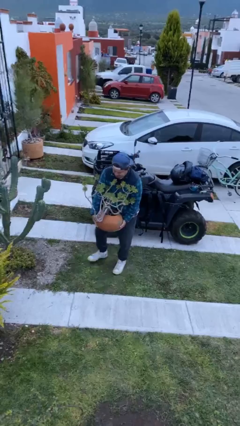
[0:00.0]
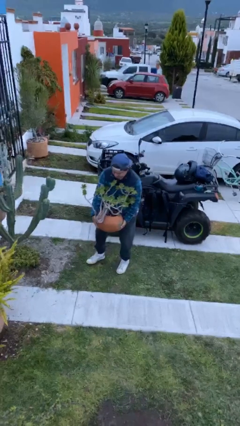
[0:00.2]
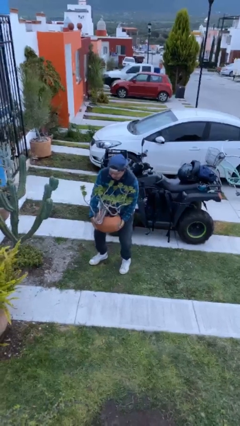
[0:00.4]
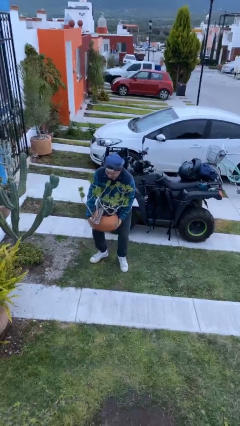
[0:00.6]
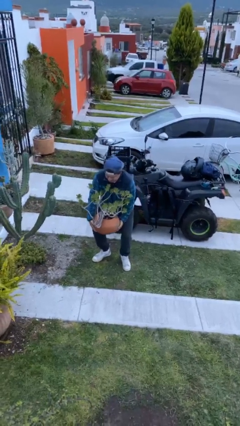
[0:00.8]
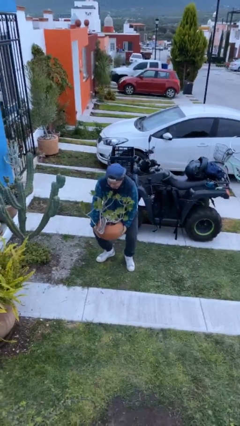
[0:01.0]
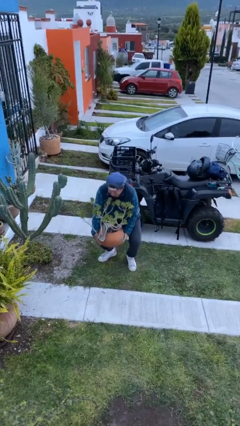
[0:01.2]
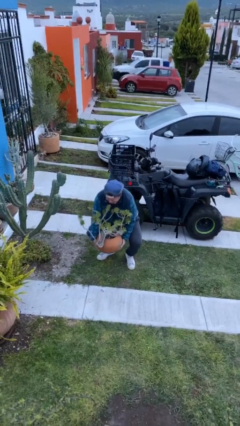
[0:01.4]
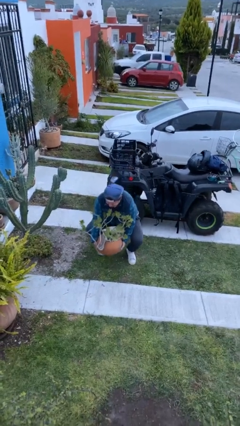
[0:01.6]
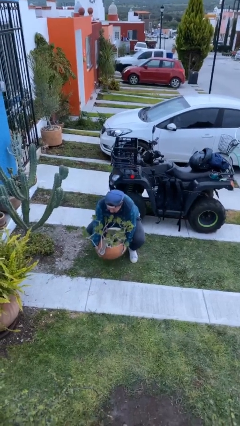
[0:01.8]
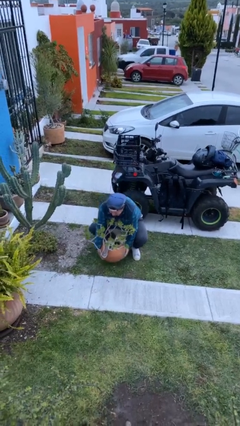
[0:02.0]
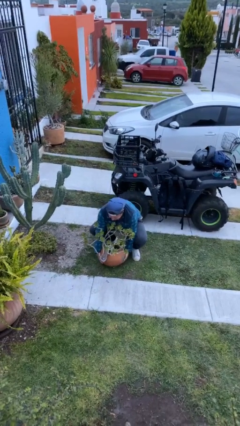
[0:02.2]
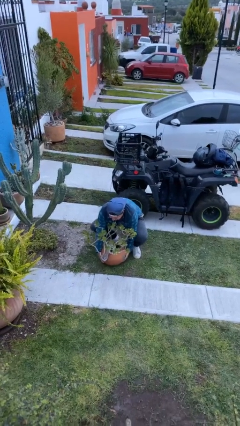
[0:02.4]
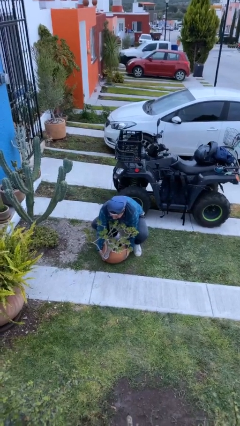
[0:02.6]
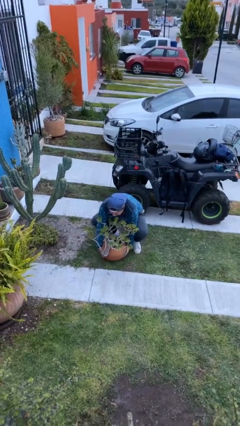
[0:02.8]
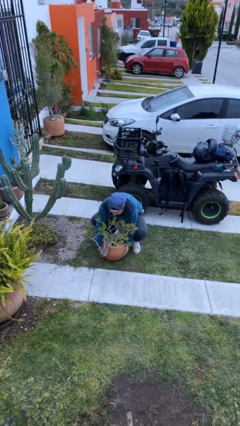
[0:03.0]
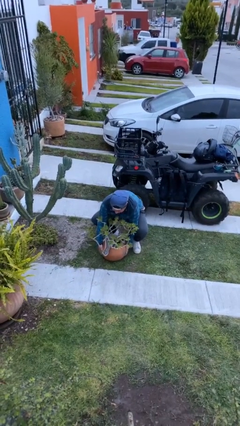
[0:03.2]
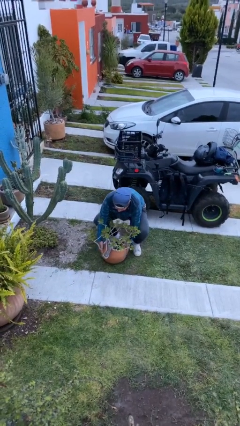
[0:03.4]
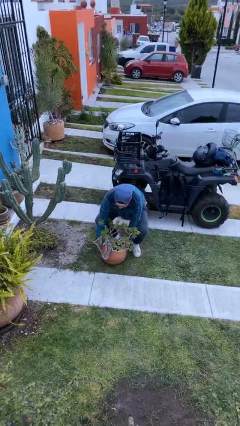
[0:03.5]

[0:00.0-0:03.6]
person puts down object on floor

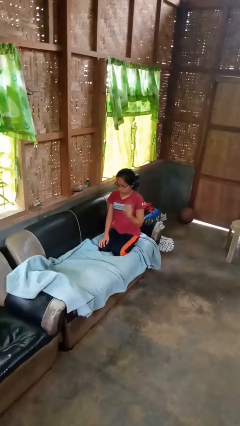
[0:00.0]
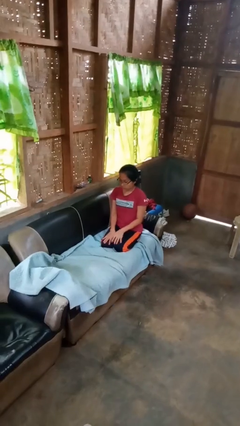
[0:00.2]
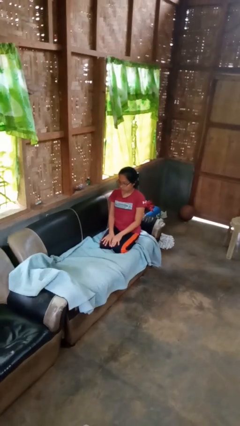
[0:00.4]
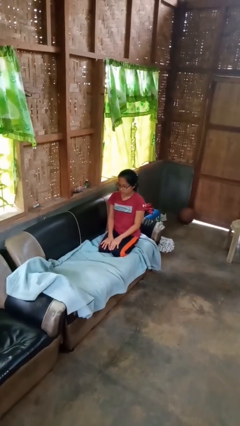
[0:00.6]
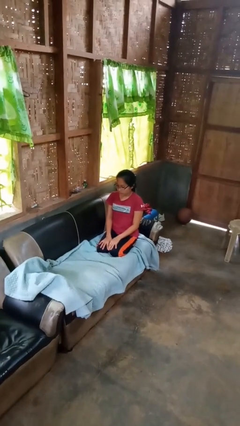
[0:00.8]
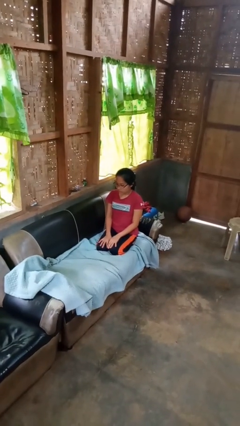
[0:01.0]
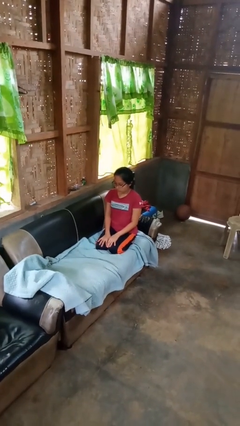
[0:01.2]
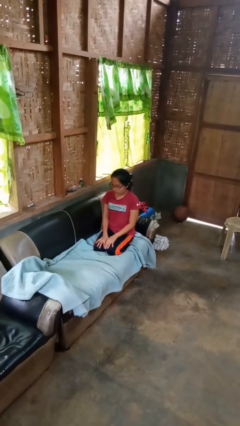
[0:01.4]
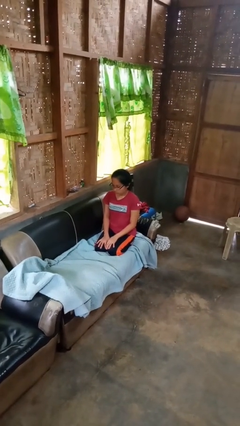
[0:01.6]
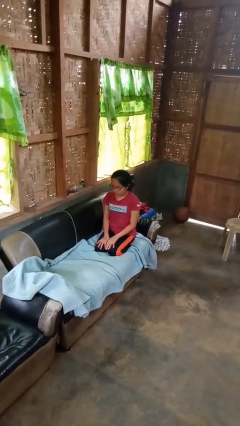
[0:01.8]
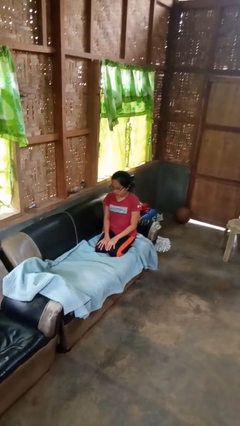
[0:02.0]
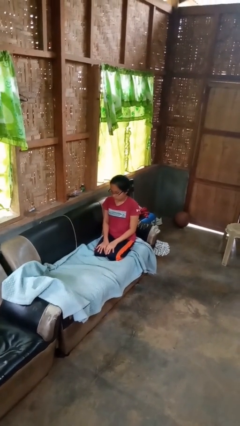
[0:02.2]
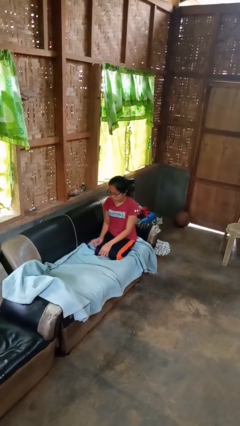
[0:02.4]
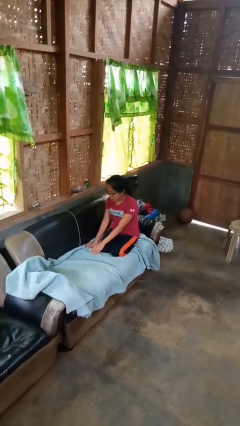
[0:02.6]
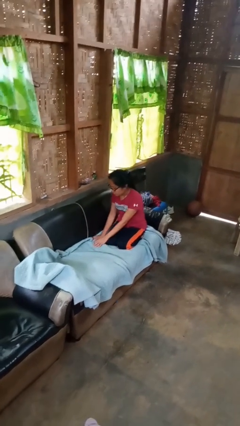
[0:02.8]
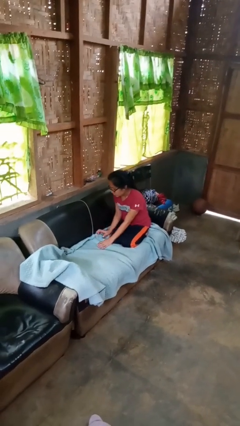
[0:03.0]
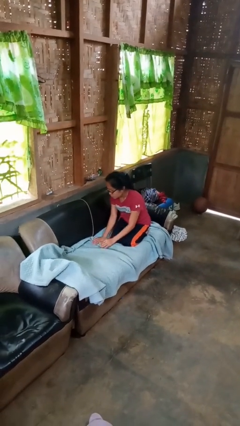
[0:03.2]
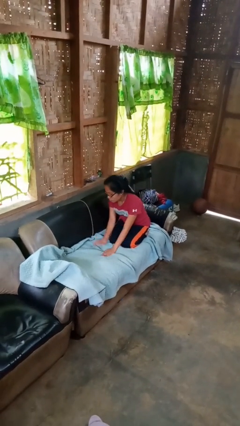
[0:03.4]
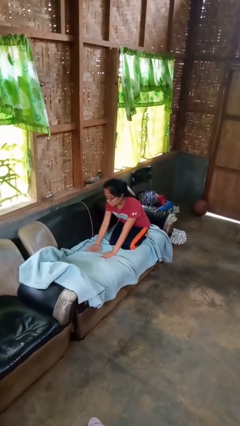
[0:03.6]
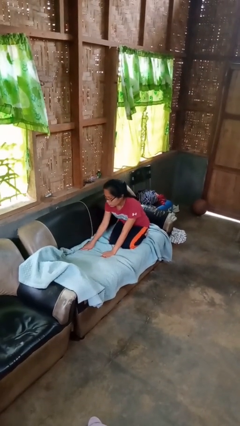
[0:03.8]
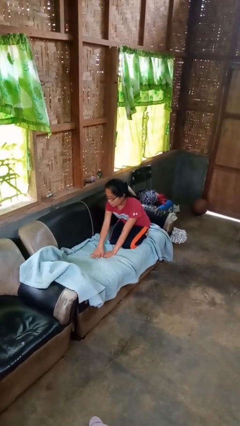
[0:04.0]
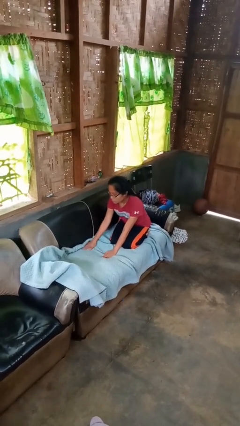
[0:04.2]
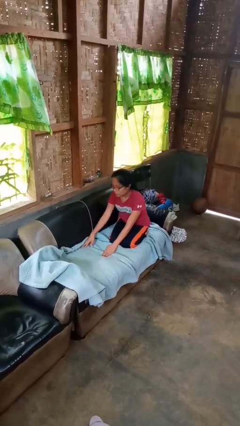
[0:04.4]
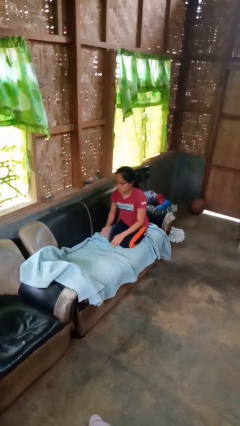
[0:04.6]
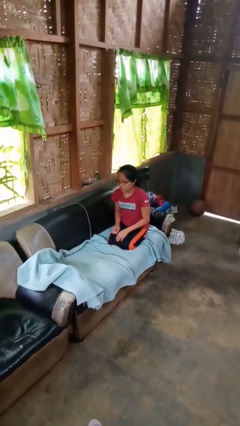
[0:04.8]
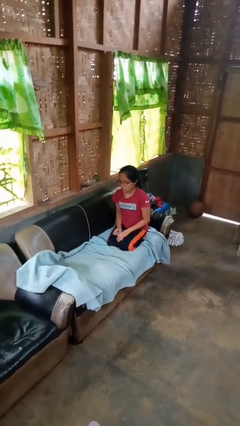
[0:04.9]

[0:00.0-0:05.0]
person searches in couch

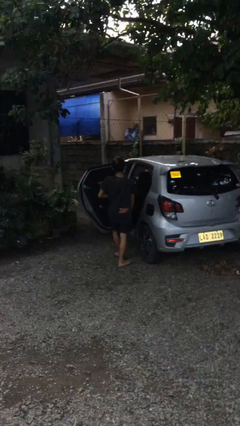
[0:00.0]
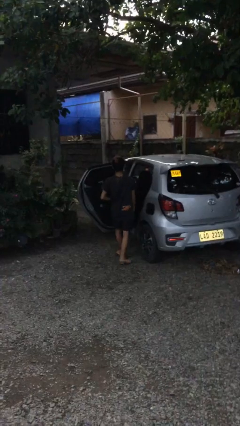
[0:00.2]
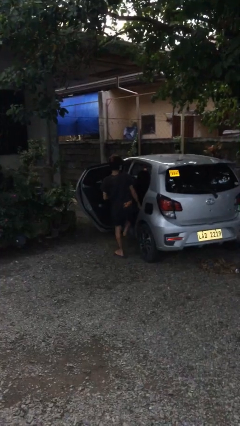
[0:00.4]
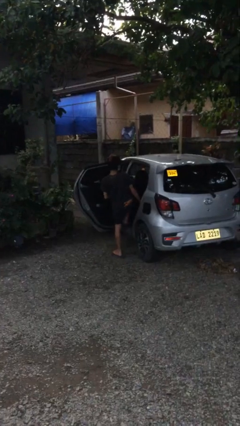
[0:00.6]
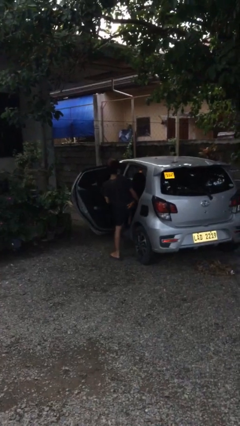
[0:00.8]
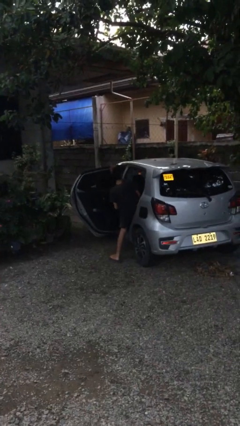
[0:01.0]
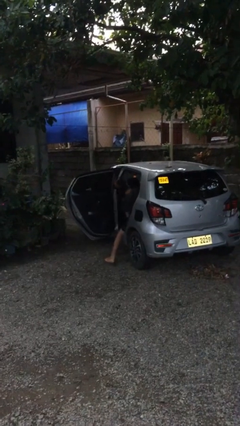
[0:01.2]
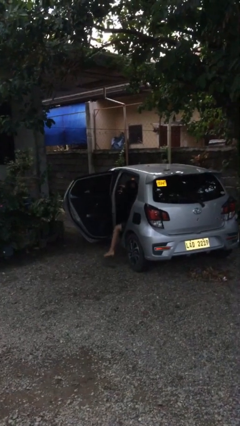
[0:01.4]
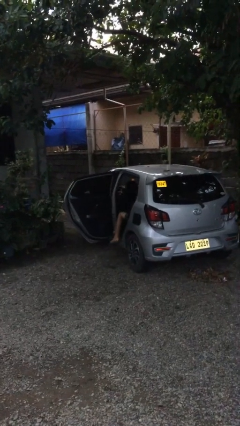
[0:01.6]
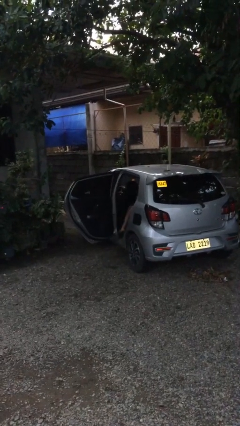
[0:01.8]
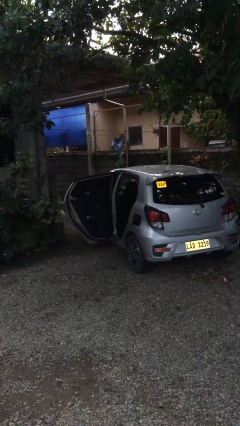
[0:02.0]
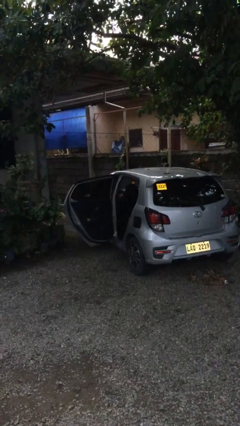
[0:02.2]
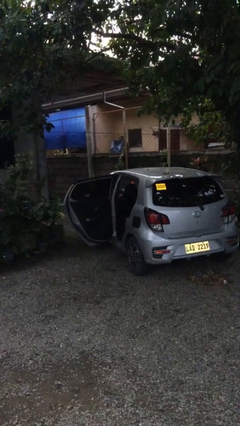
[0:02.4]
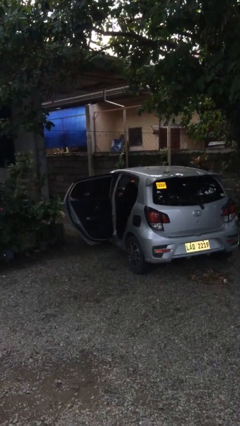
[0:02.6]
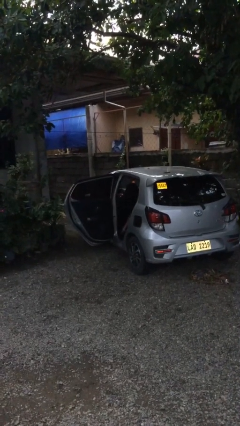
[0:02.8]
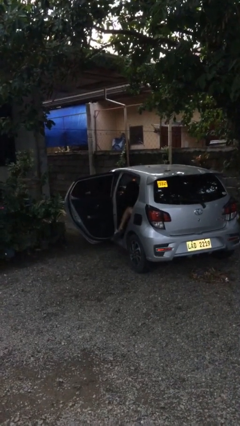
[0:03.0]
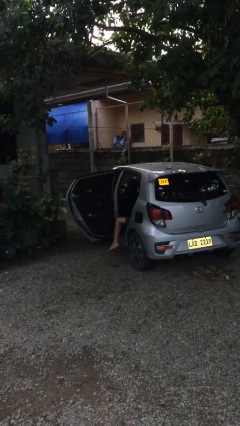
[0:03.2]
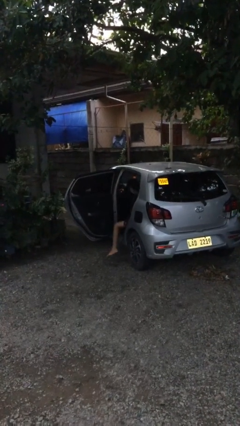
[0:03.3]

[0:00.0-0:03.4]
person enters car

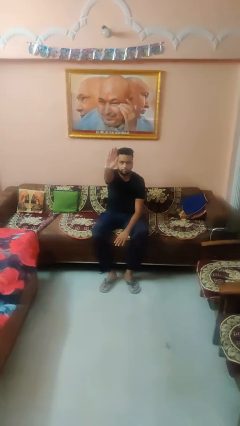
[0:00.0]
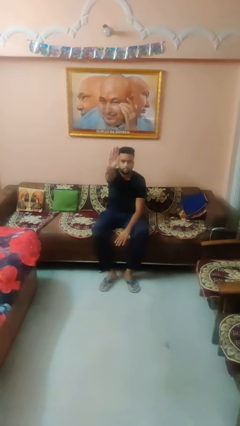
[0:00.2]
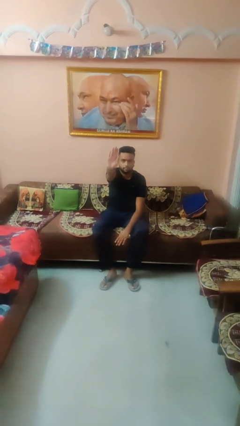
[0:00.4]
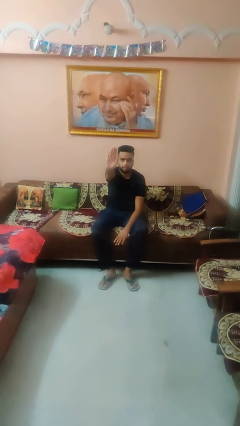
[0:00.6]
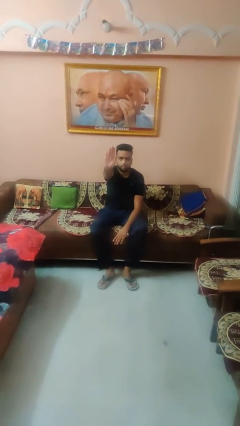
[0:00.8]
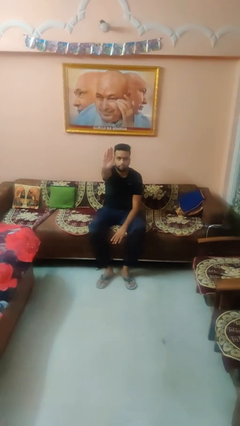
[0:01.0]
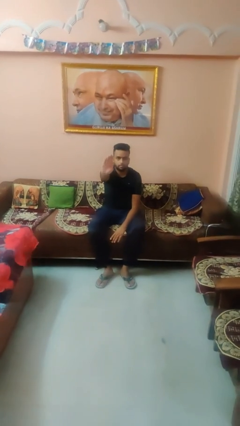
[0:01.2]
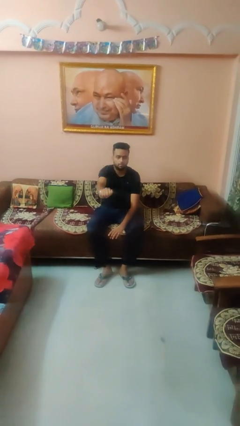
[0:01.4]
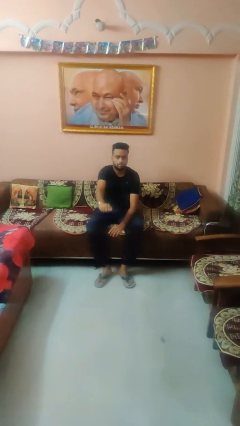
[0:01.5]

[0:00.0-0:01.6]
person gestures stop

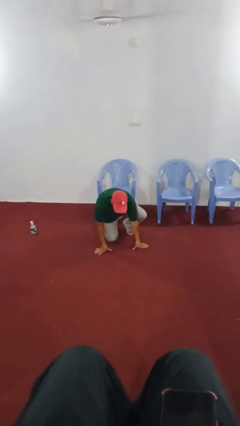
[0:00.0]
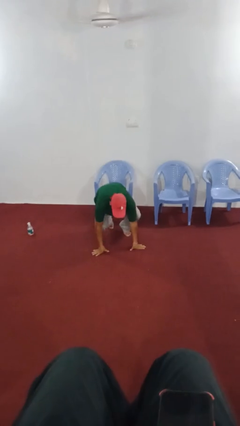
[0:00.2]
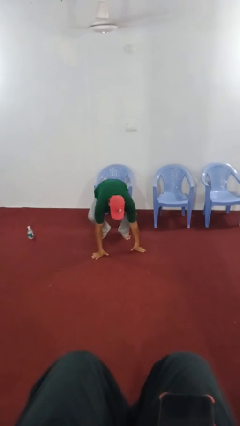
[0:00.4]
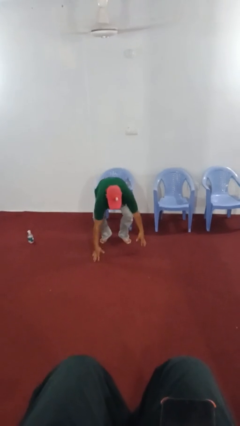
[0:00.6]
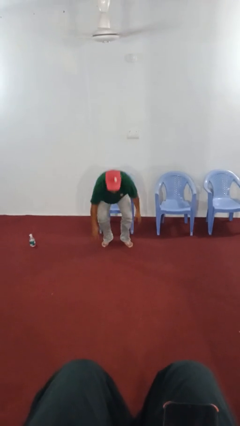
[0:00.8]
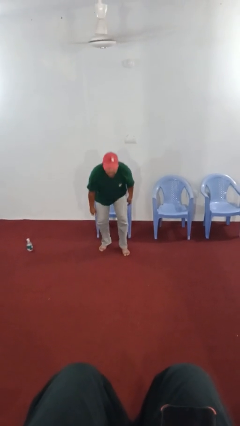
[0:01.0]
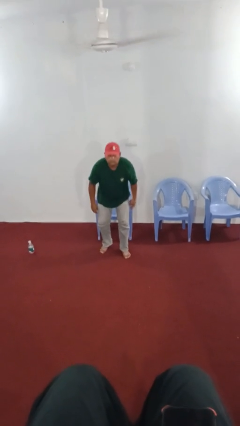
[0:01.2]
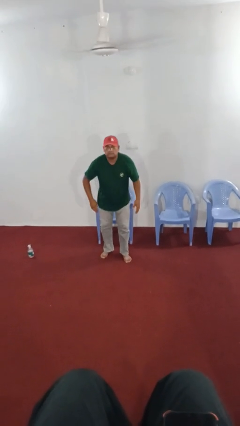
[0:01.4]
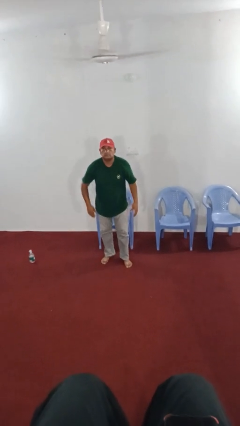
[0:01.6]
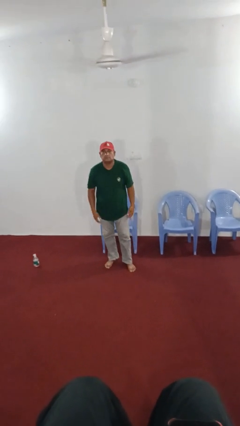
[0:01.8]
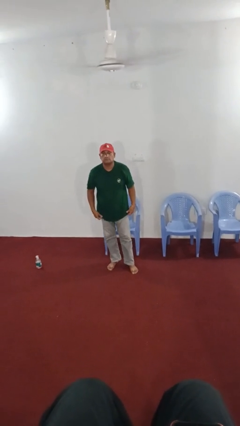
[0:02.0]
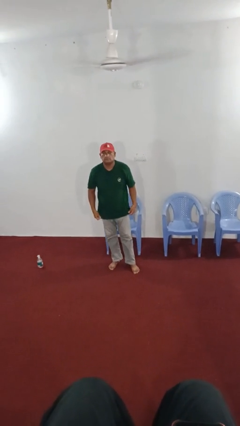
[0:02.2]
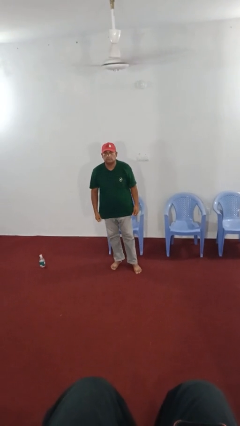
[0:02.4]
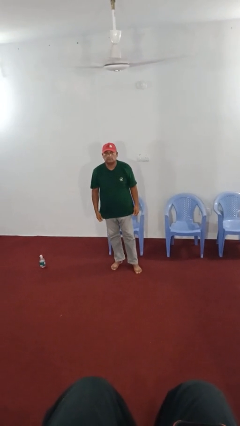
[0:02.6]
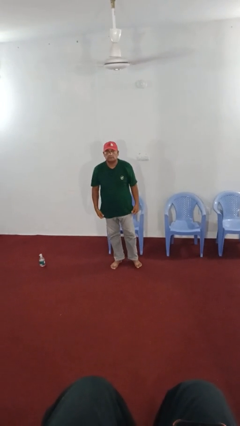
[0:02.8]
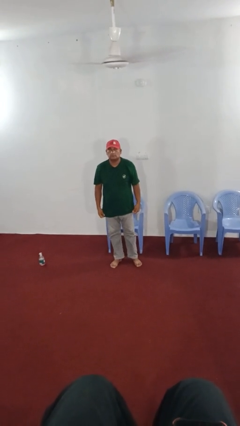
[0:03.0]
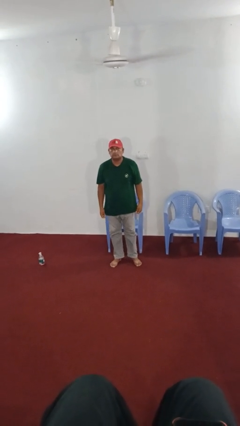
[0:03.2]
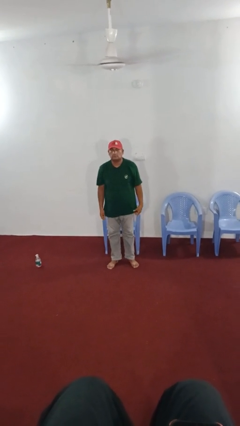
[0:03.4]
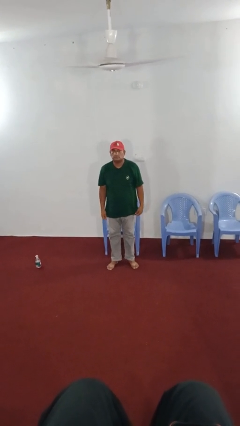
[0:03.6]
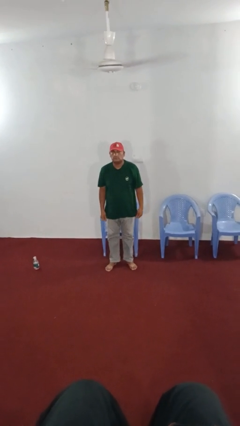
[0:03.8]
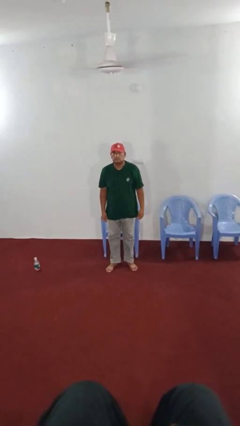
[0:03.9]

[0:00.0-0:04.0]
person stands up from floor
